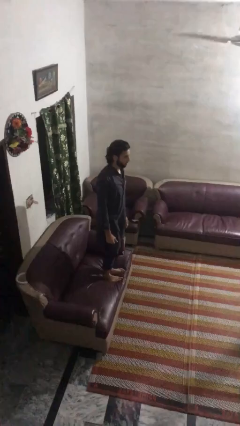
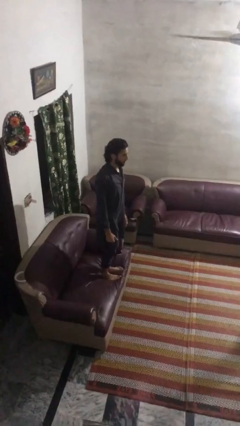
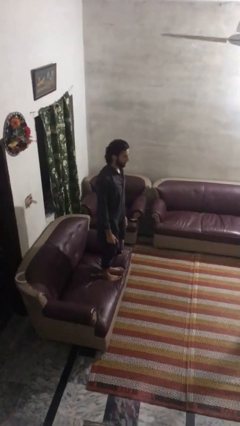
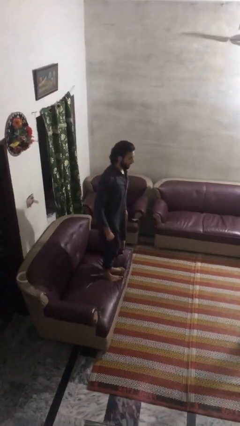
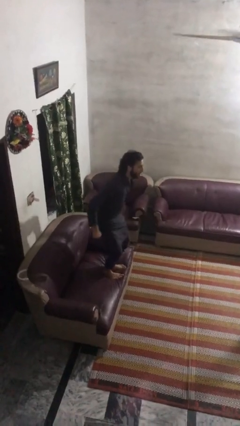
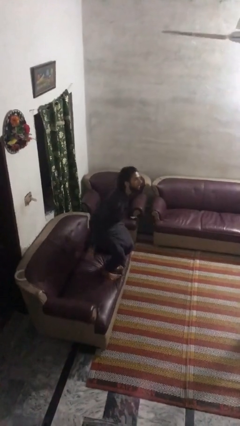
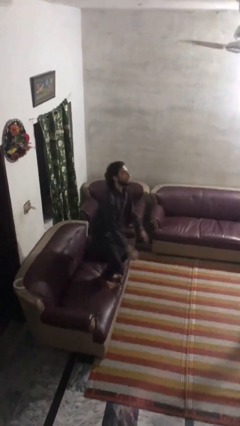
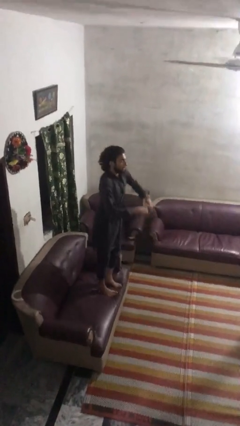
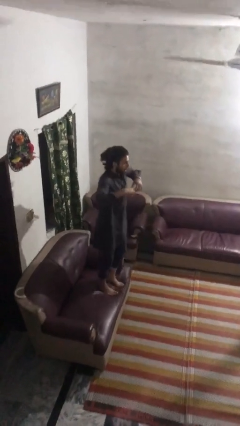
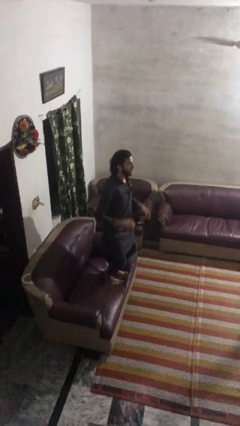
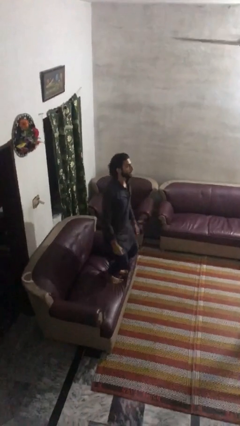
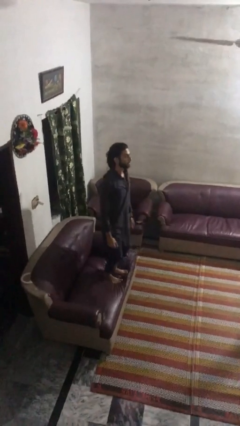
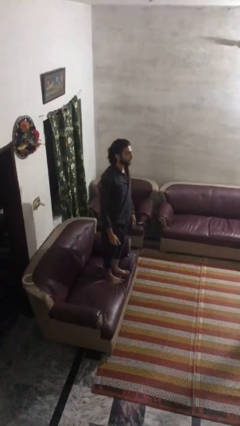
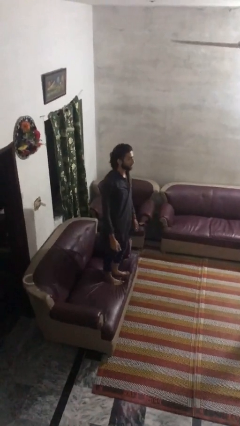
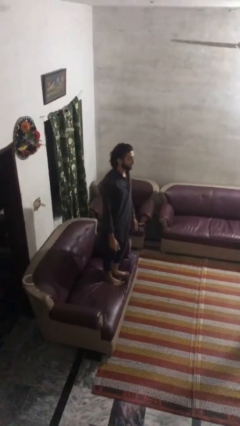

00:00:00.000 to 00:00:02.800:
person jumps on couch

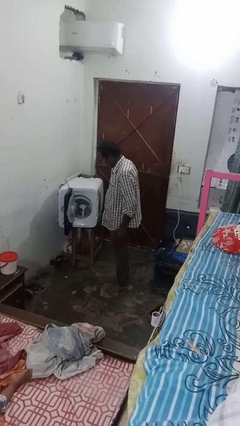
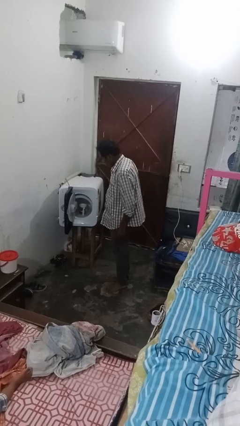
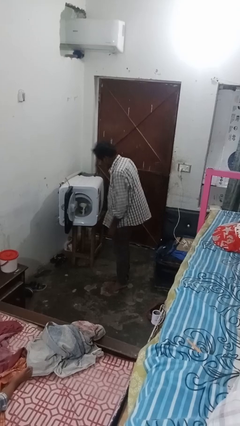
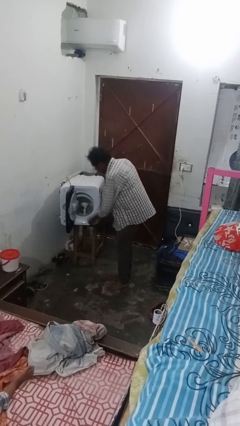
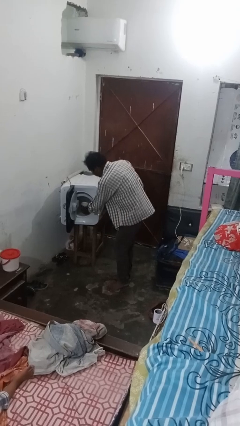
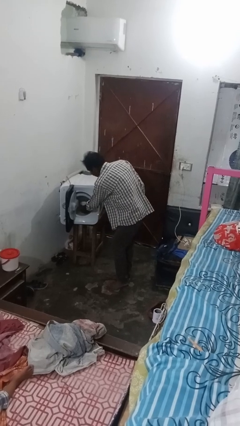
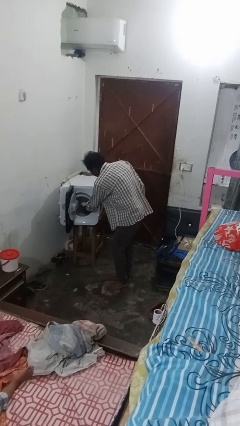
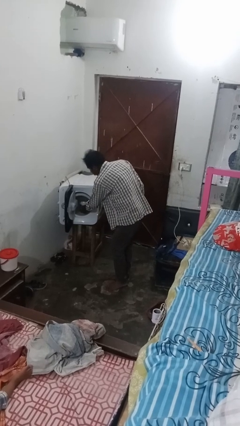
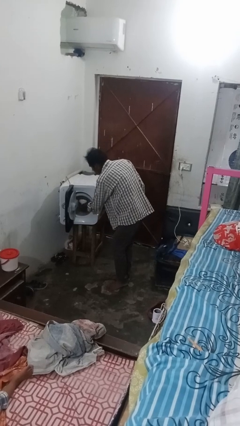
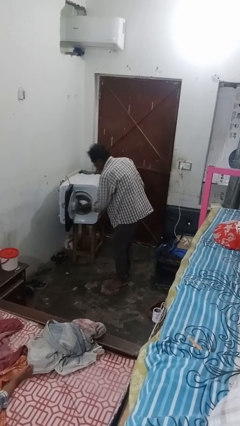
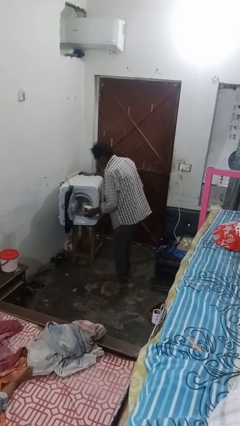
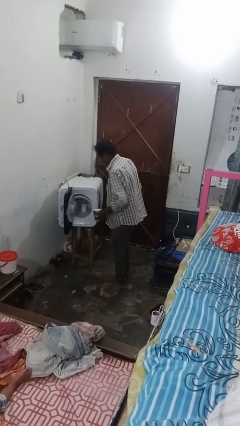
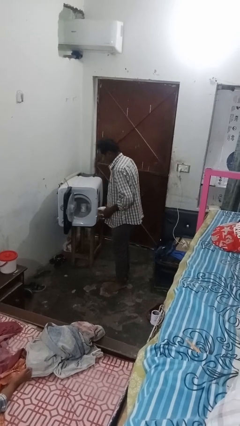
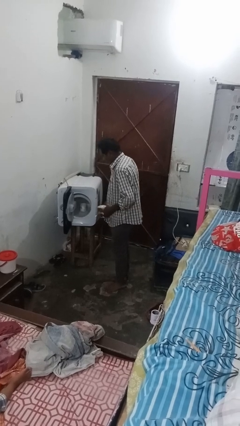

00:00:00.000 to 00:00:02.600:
person unloads dishwasher

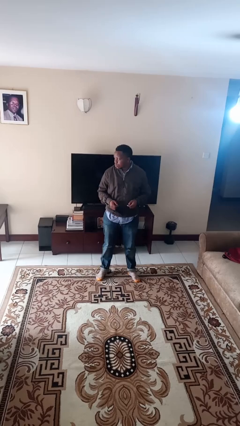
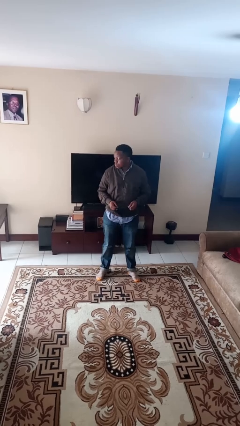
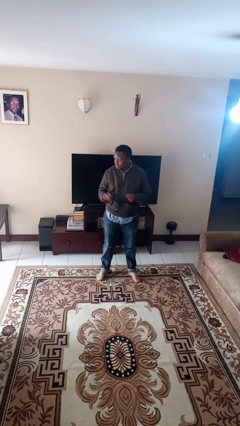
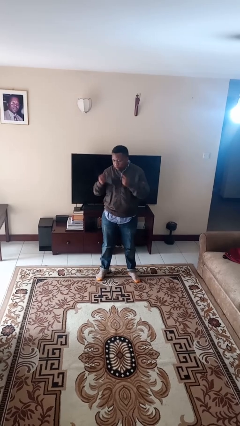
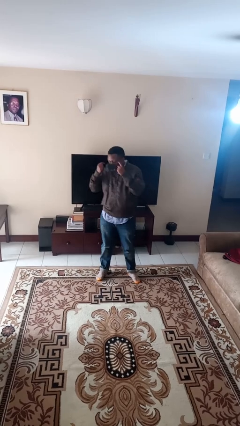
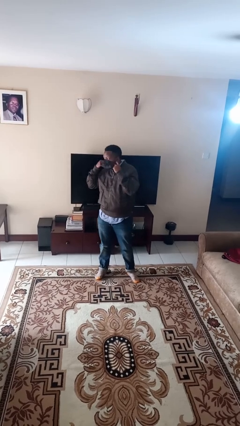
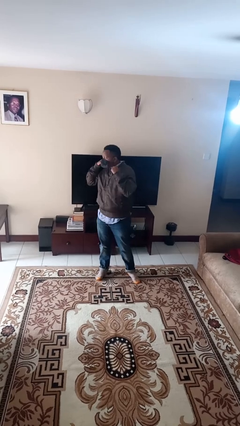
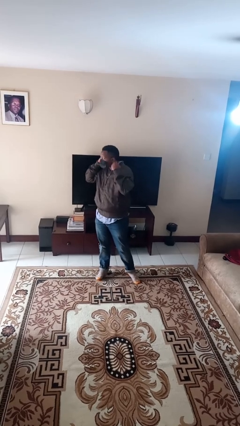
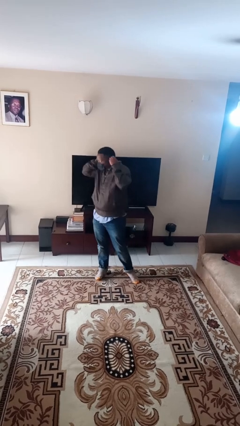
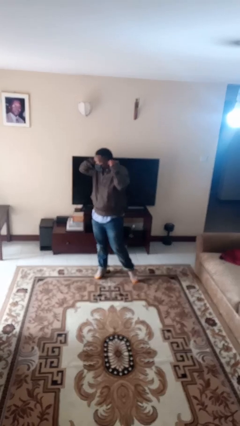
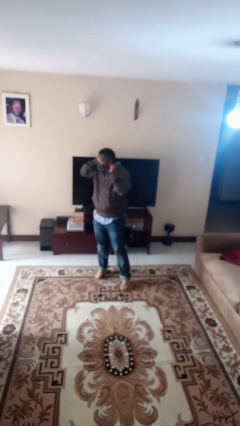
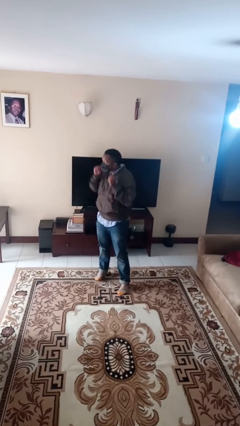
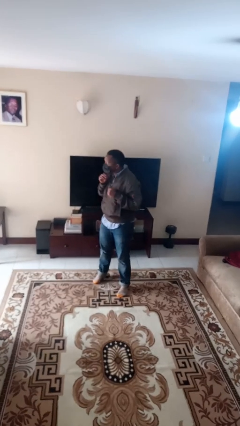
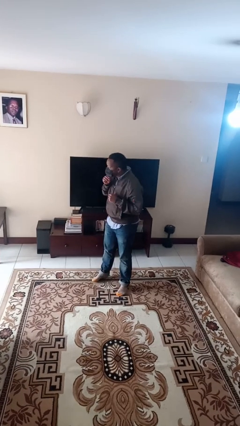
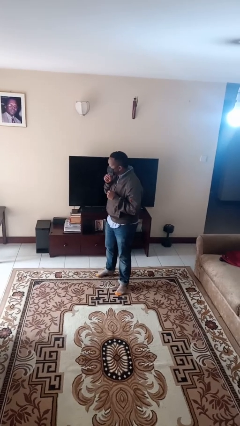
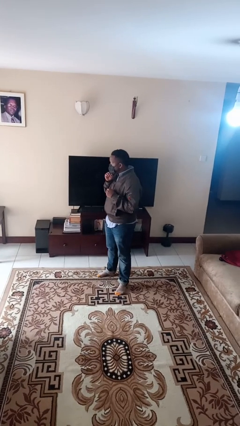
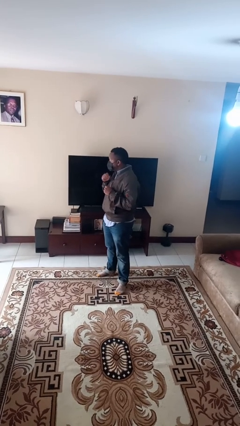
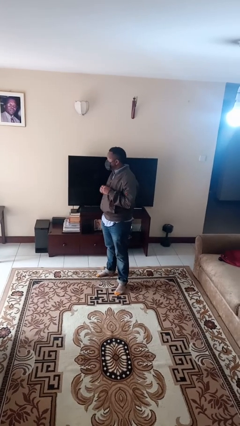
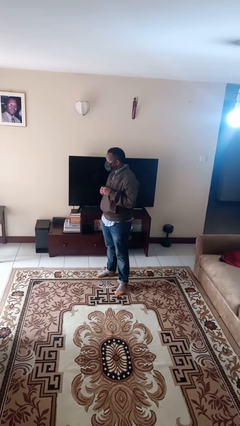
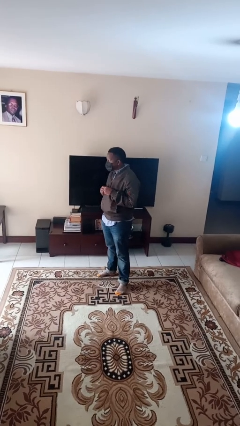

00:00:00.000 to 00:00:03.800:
person puts on facemask

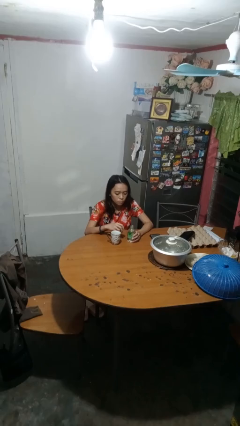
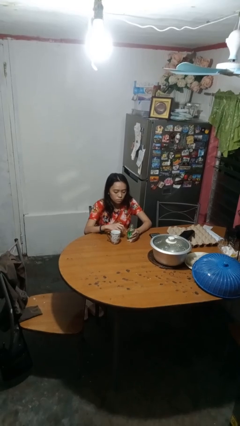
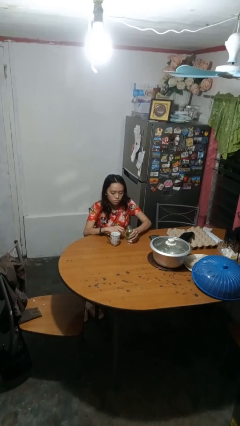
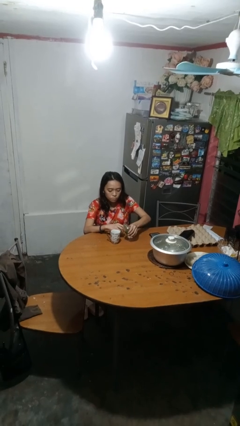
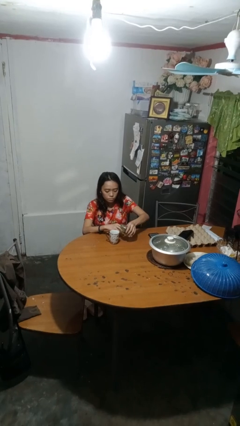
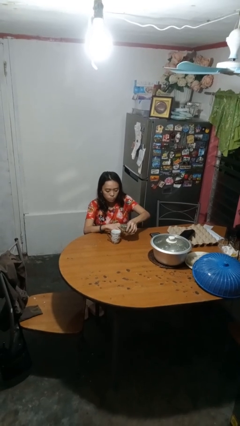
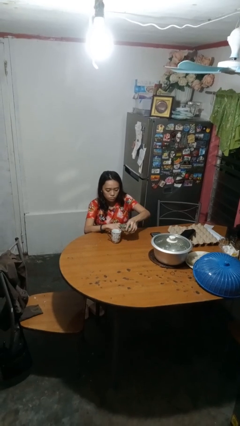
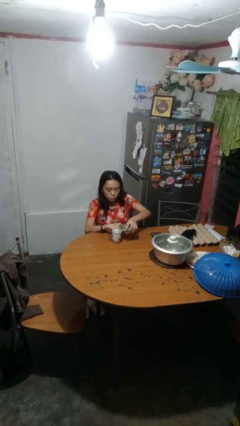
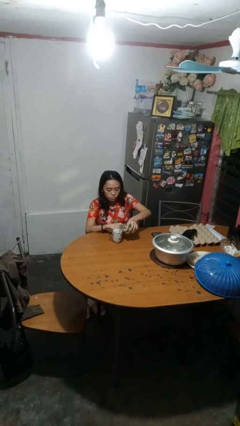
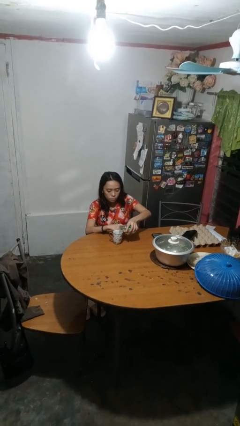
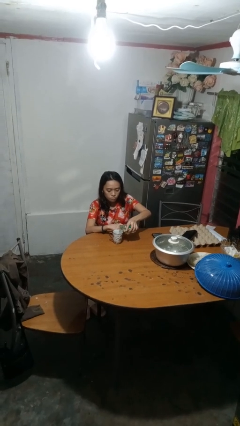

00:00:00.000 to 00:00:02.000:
person pours liquid into cup

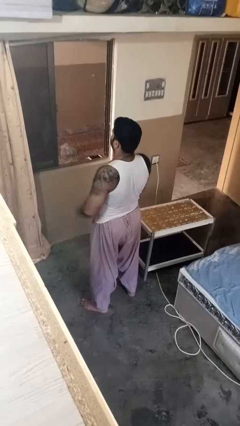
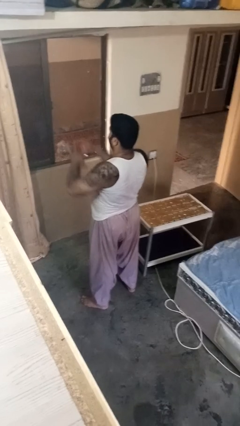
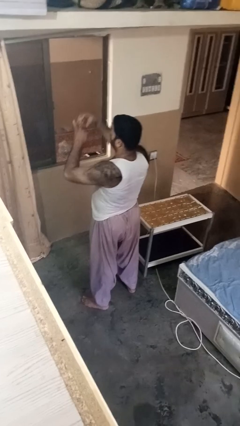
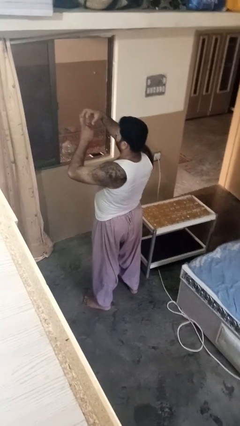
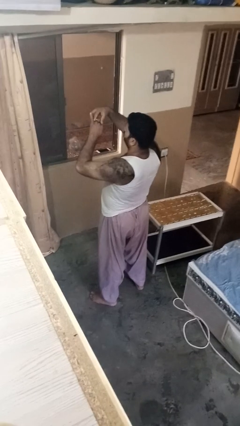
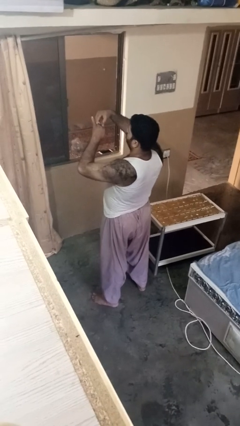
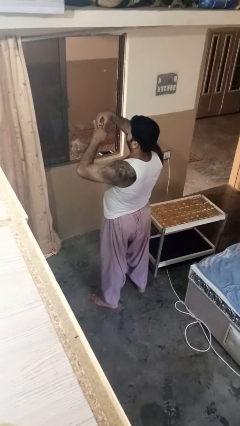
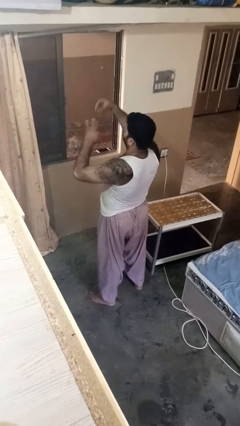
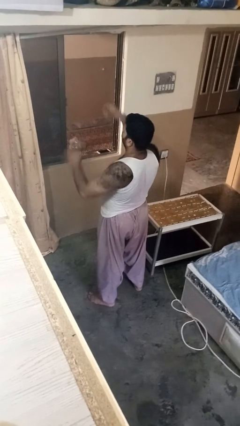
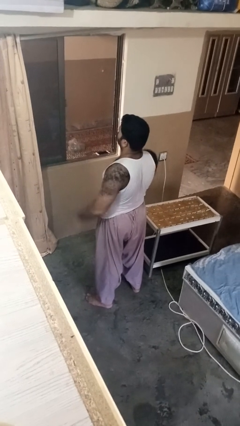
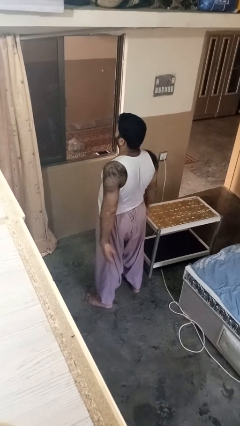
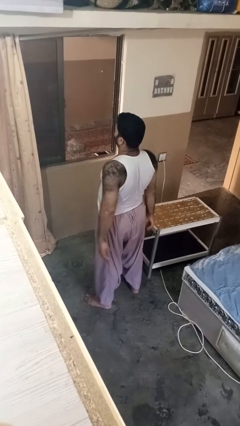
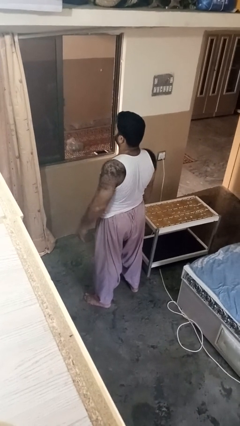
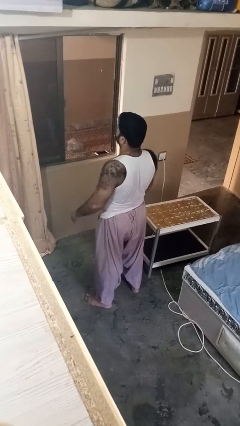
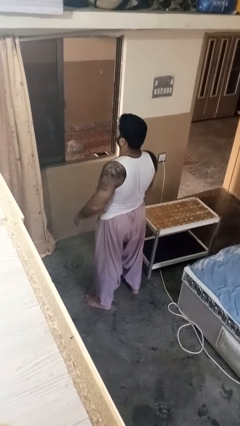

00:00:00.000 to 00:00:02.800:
person takes off ring

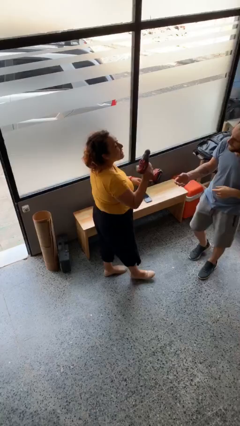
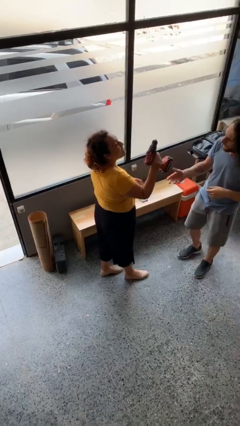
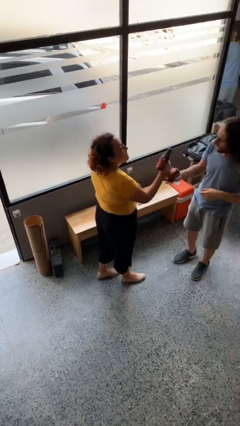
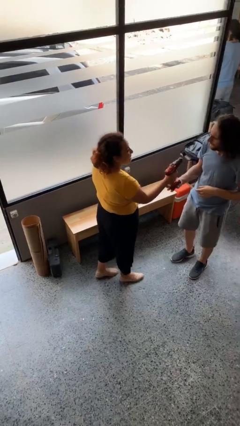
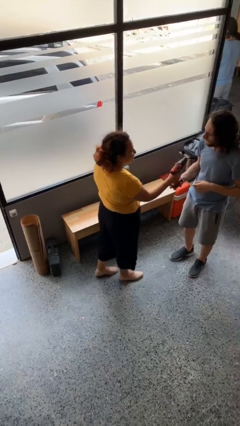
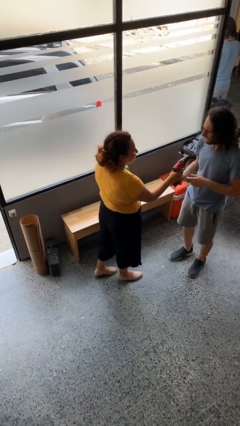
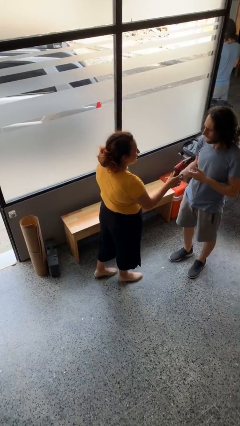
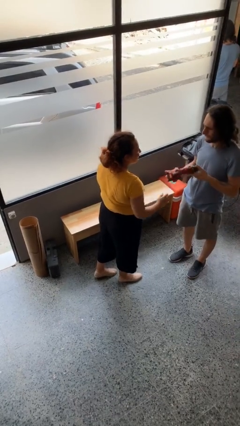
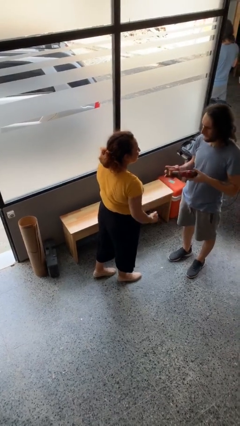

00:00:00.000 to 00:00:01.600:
person transfers object to person

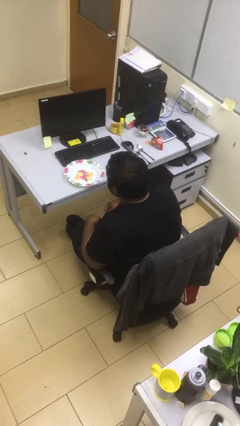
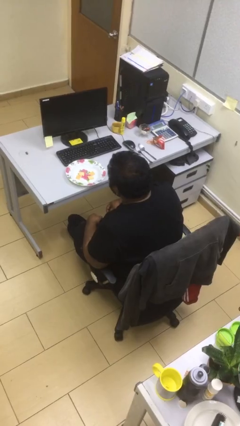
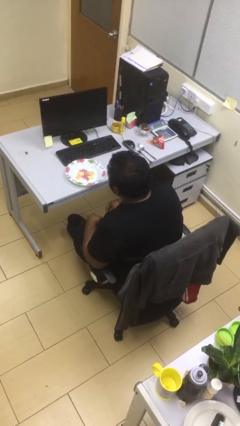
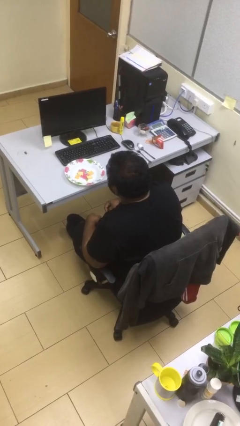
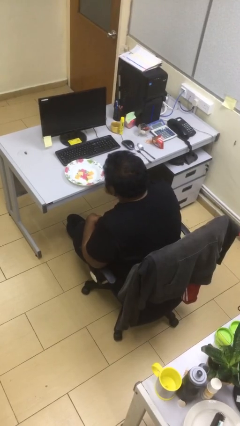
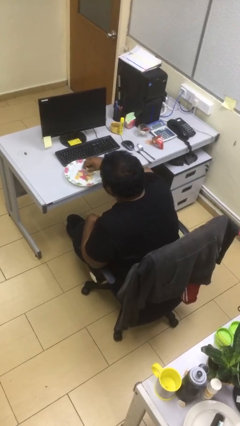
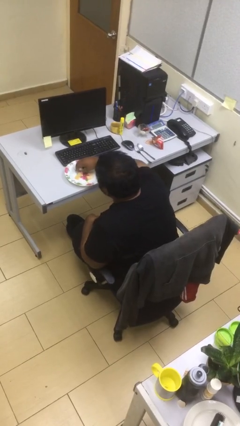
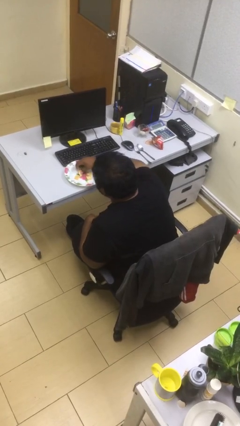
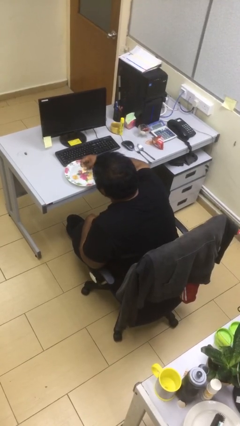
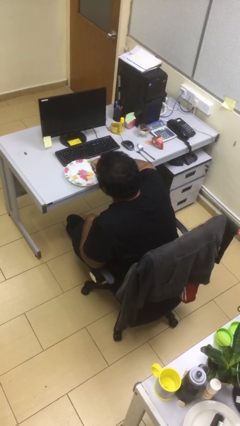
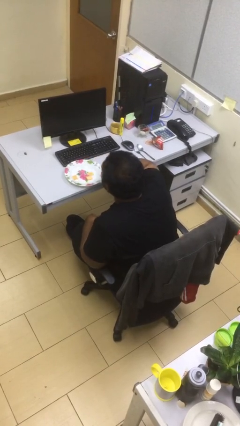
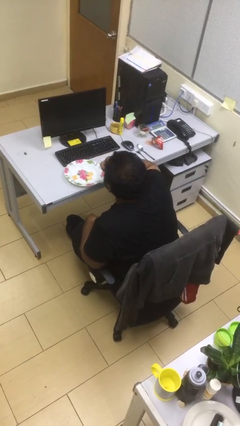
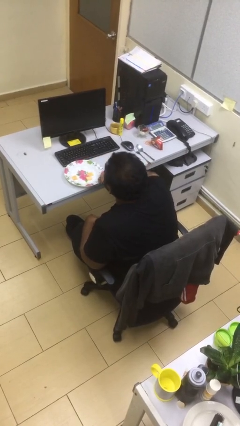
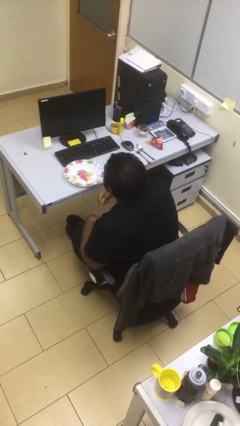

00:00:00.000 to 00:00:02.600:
person eats with hands
